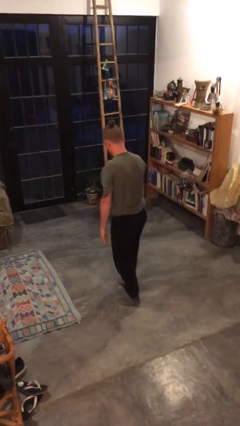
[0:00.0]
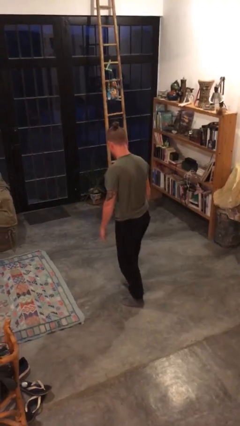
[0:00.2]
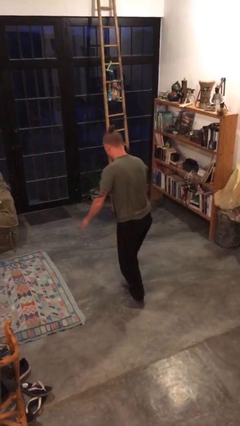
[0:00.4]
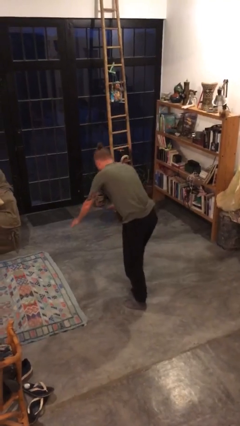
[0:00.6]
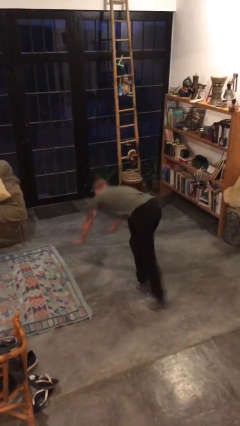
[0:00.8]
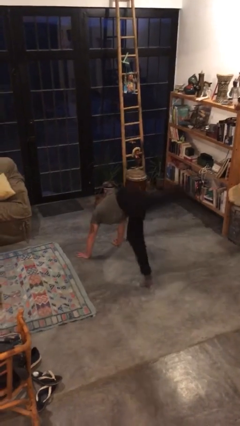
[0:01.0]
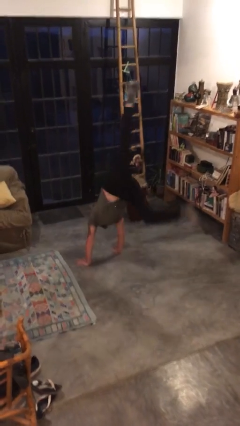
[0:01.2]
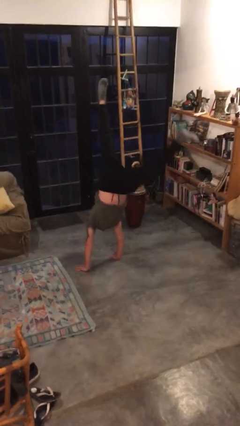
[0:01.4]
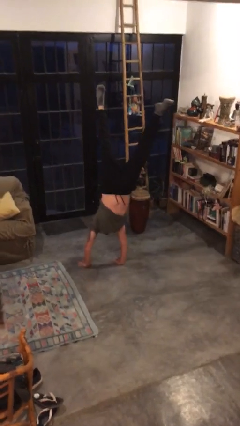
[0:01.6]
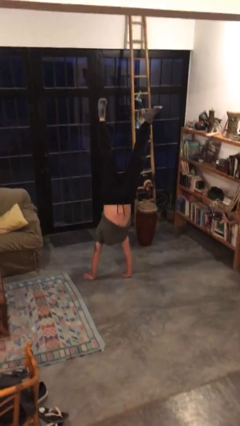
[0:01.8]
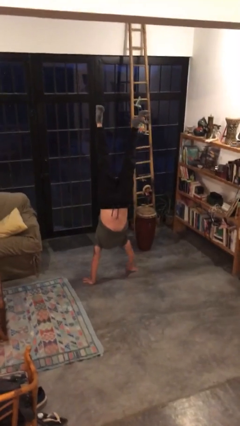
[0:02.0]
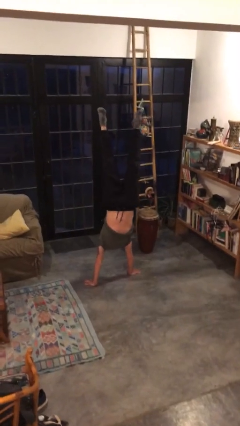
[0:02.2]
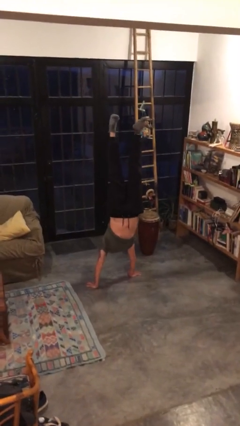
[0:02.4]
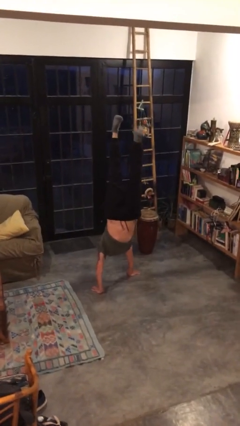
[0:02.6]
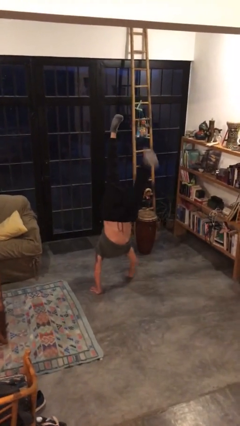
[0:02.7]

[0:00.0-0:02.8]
person handstand

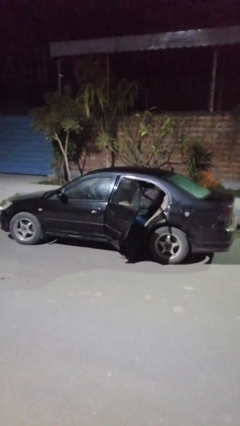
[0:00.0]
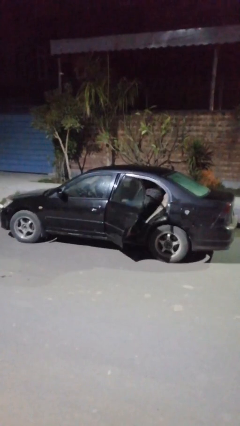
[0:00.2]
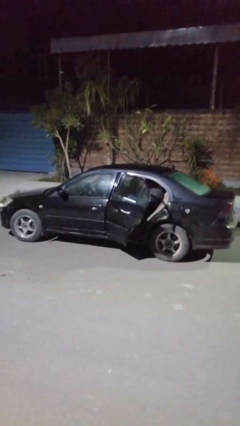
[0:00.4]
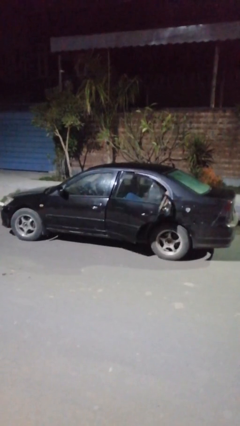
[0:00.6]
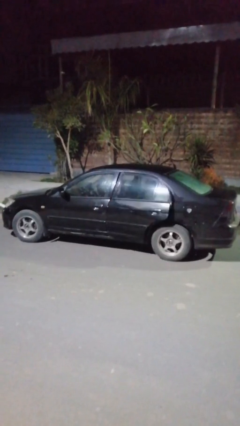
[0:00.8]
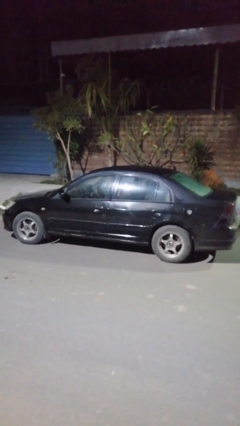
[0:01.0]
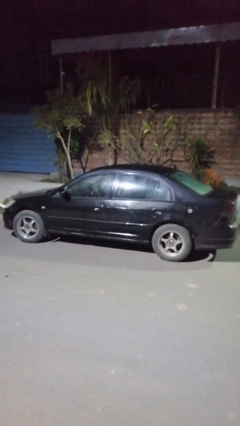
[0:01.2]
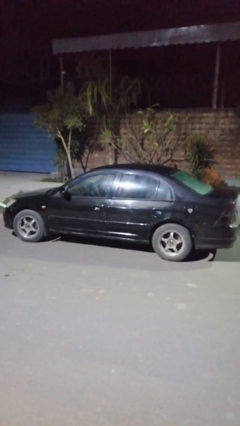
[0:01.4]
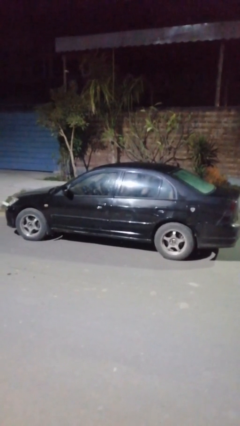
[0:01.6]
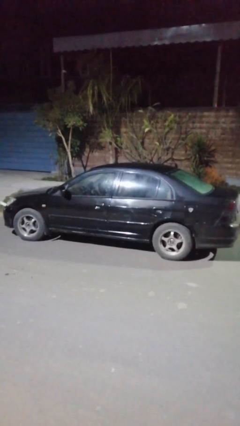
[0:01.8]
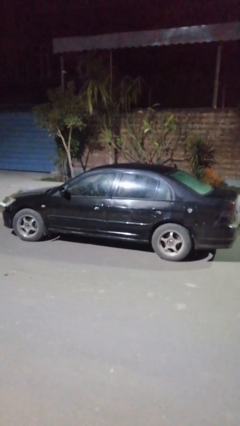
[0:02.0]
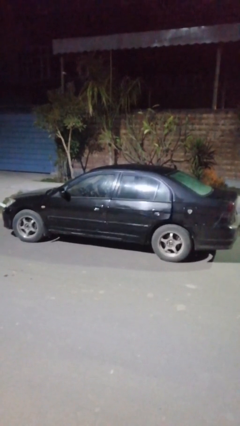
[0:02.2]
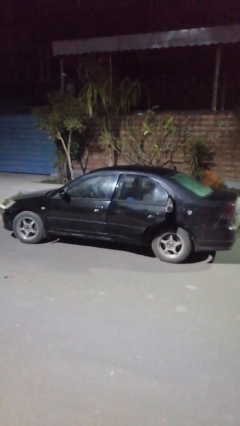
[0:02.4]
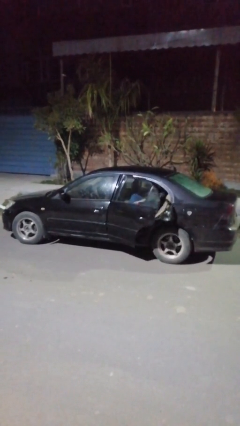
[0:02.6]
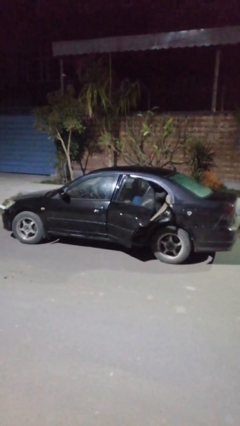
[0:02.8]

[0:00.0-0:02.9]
car picks up person

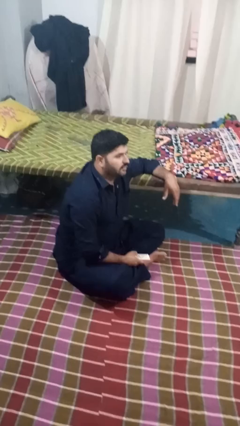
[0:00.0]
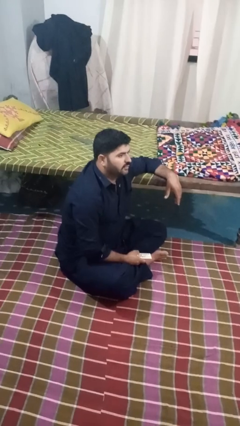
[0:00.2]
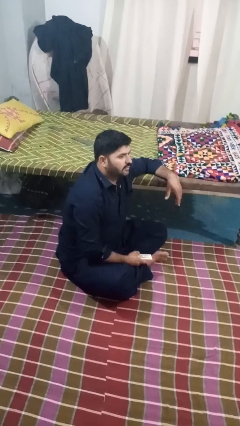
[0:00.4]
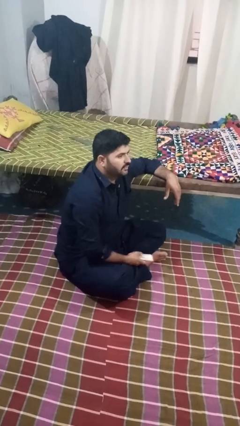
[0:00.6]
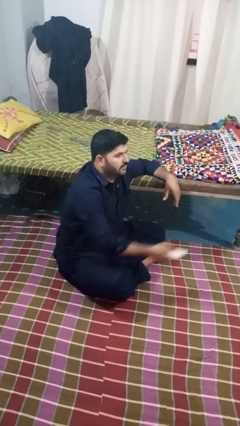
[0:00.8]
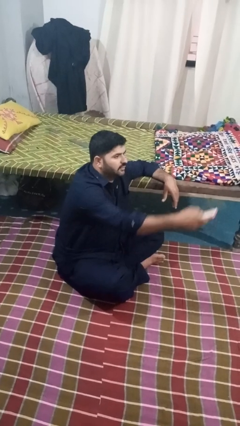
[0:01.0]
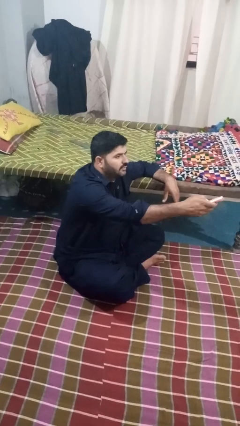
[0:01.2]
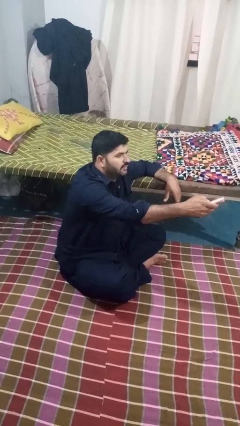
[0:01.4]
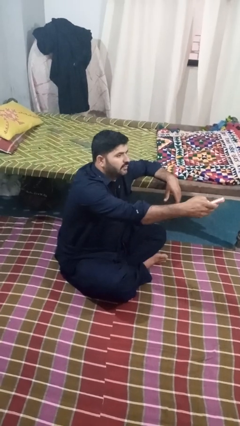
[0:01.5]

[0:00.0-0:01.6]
person uses television remote

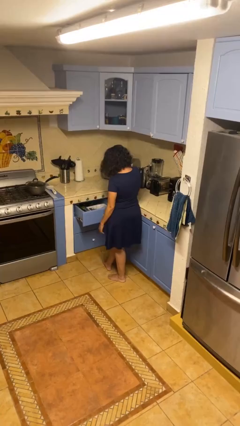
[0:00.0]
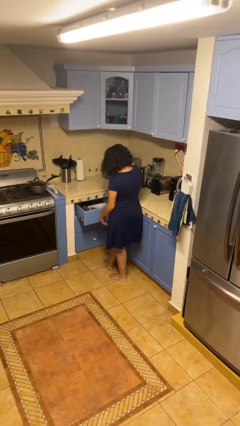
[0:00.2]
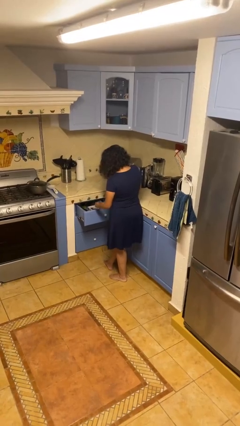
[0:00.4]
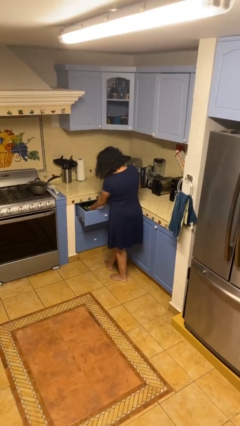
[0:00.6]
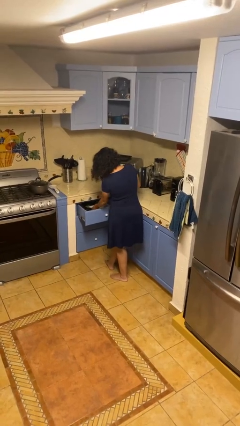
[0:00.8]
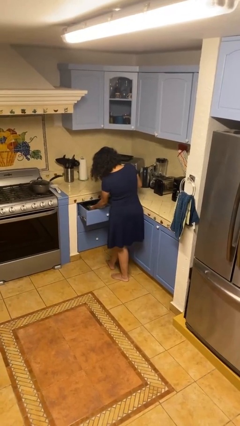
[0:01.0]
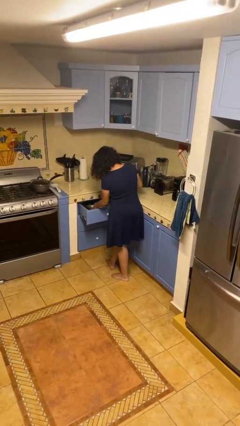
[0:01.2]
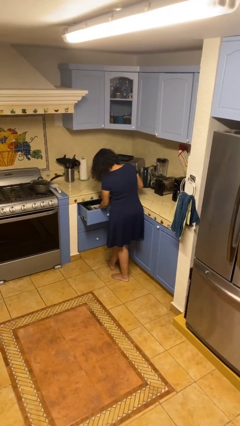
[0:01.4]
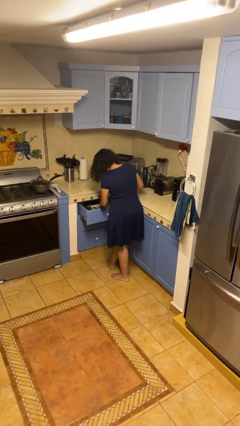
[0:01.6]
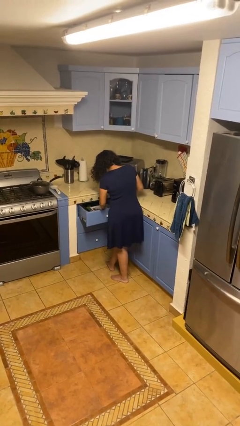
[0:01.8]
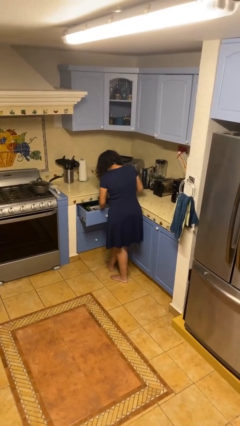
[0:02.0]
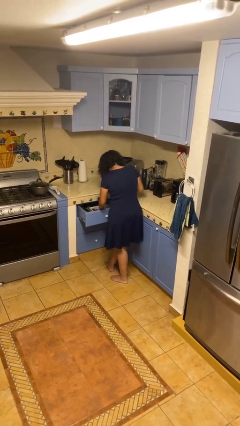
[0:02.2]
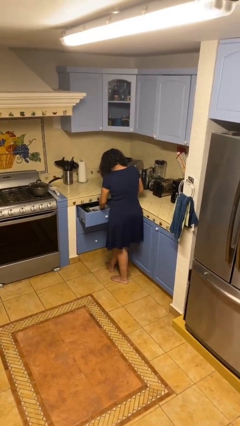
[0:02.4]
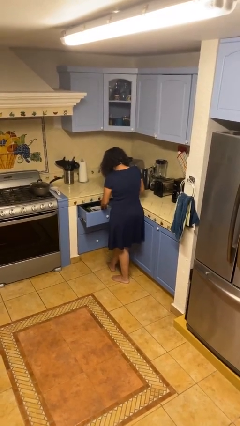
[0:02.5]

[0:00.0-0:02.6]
person searches in kitchen drawer

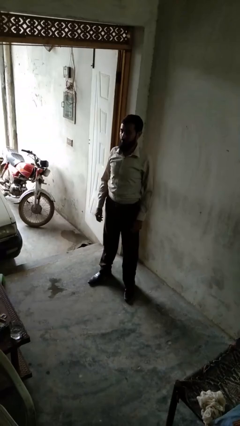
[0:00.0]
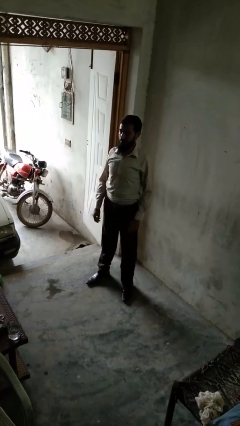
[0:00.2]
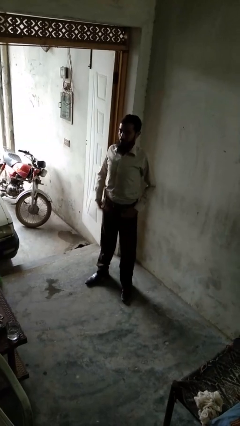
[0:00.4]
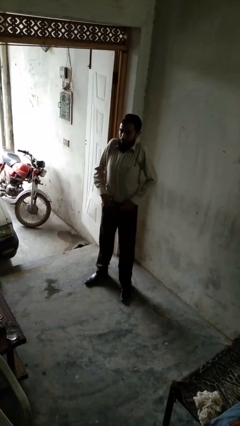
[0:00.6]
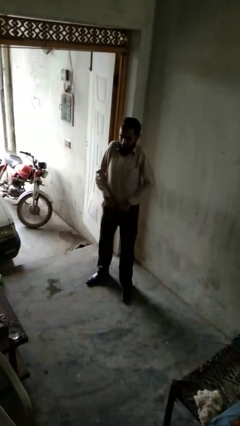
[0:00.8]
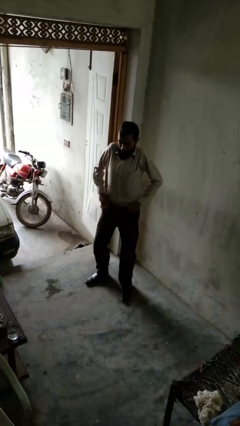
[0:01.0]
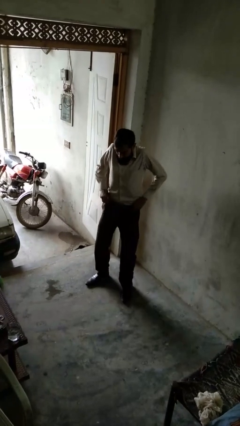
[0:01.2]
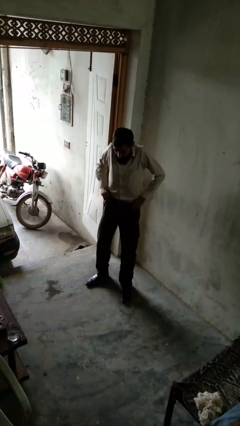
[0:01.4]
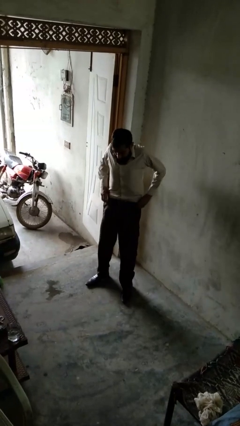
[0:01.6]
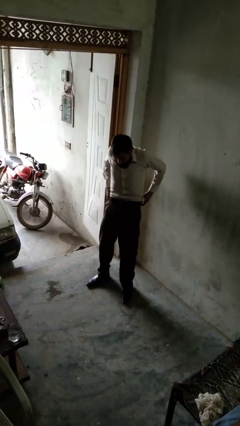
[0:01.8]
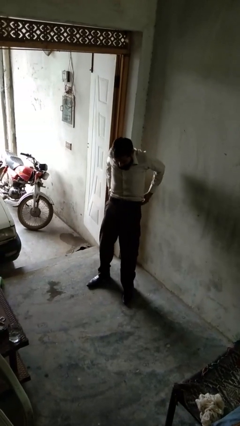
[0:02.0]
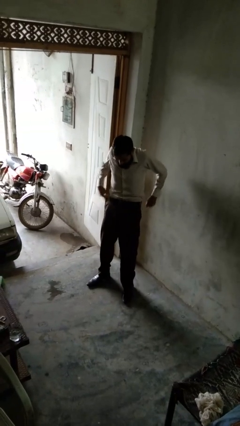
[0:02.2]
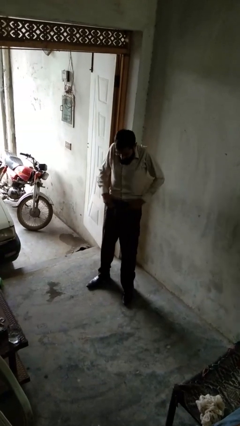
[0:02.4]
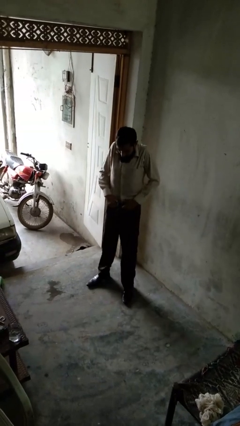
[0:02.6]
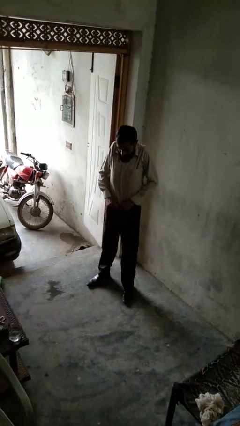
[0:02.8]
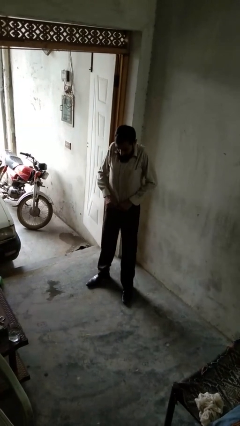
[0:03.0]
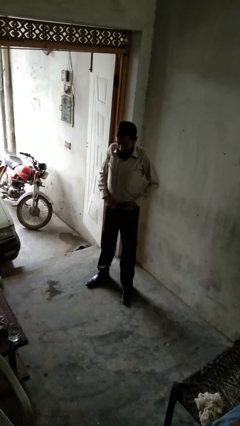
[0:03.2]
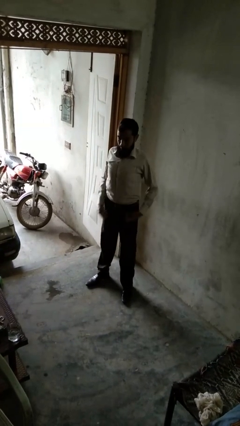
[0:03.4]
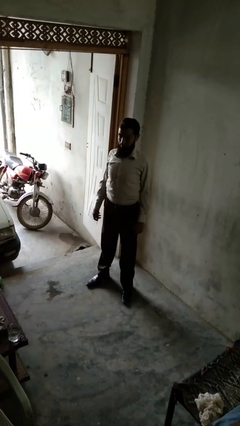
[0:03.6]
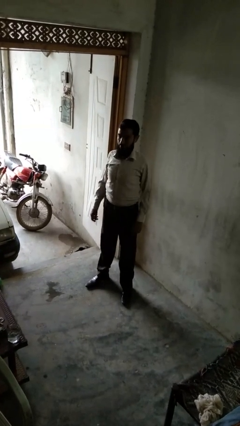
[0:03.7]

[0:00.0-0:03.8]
person hikes up pants

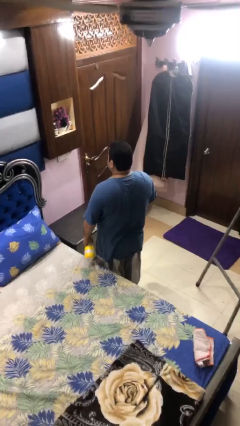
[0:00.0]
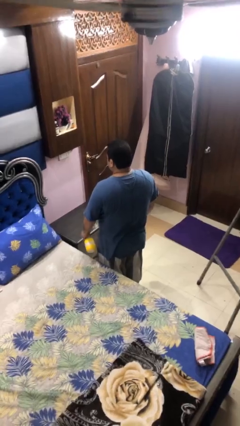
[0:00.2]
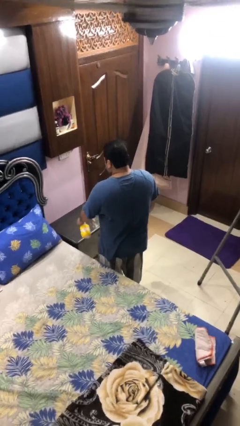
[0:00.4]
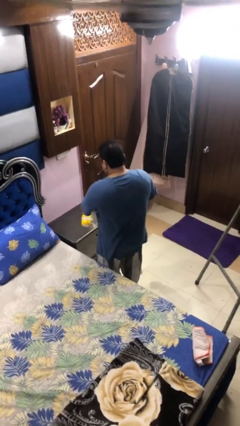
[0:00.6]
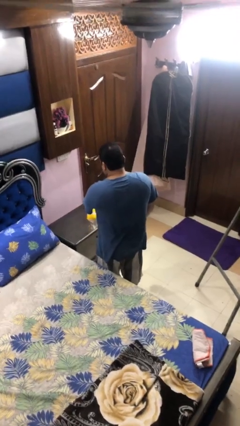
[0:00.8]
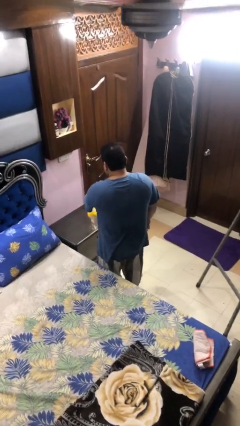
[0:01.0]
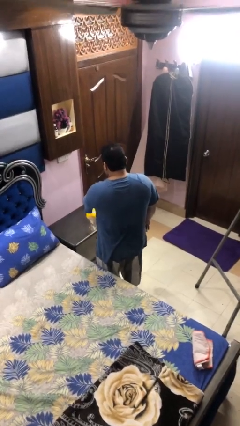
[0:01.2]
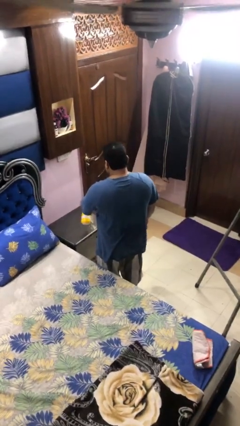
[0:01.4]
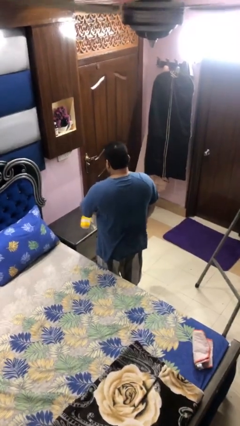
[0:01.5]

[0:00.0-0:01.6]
person sprays from bottle

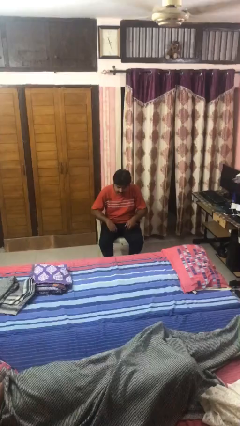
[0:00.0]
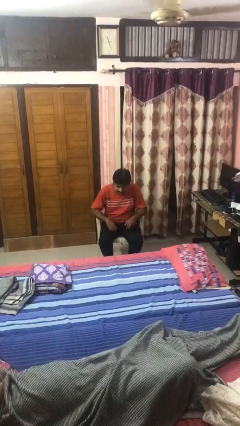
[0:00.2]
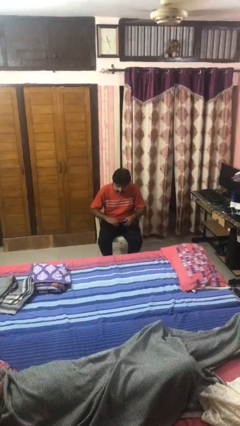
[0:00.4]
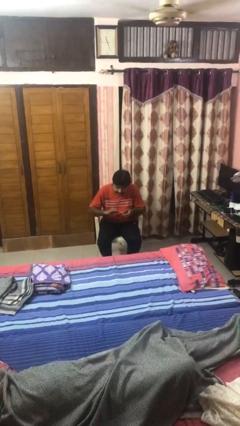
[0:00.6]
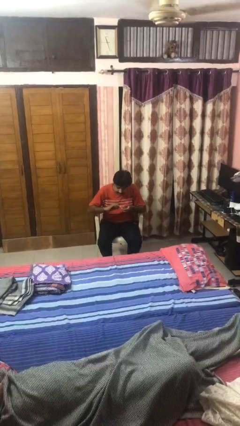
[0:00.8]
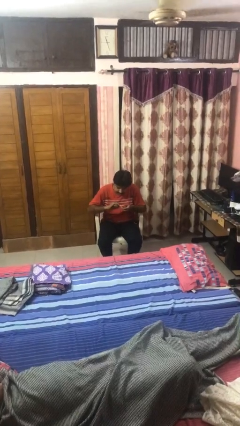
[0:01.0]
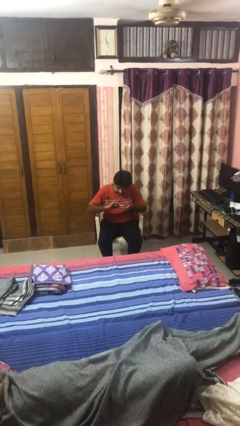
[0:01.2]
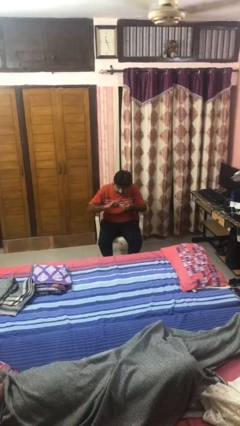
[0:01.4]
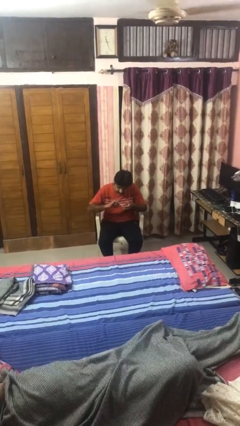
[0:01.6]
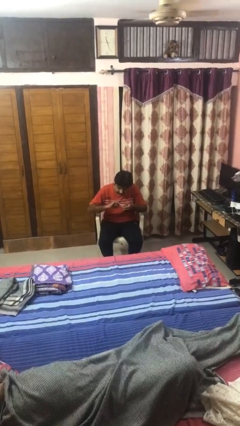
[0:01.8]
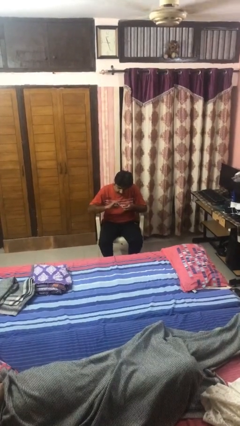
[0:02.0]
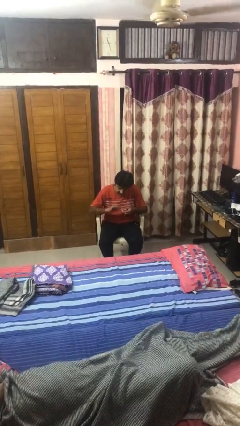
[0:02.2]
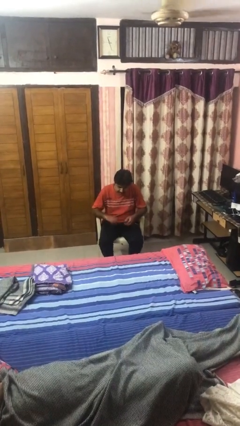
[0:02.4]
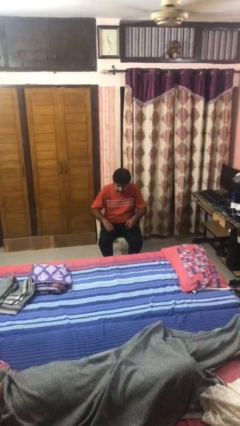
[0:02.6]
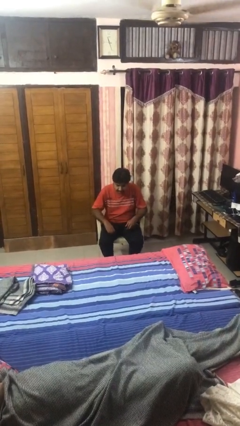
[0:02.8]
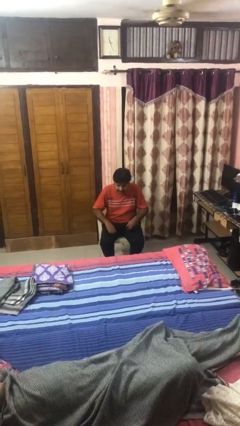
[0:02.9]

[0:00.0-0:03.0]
person clips fingernails
